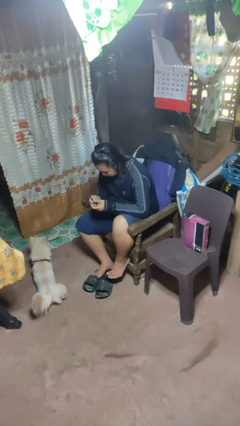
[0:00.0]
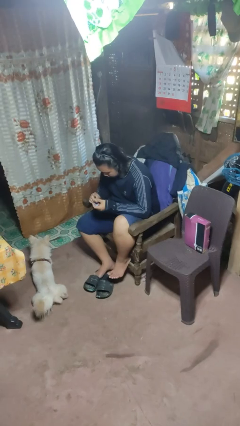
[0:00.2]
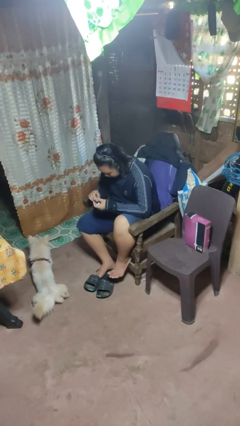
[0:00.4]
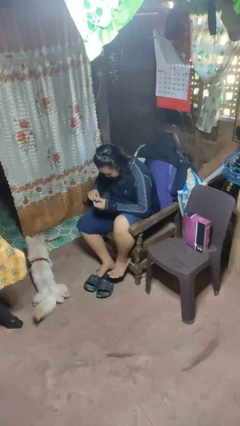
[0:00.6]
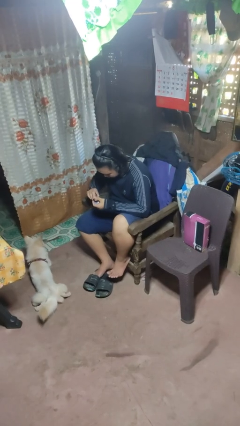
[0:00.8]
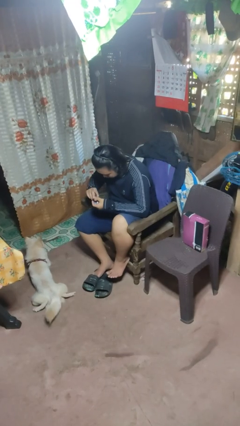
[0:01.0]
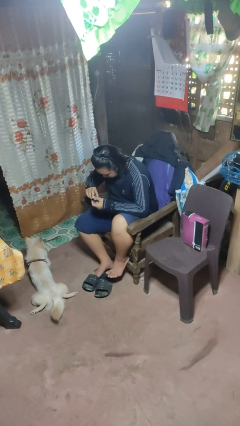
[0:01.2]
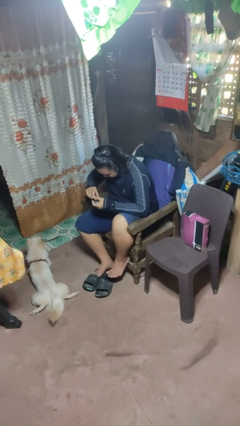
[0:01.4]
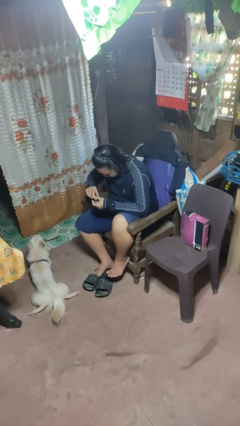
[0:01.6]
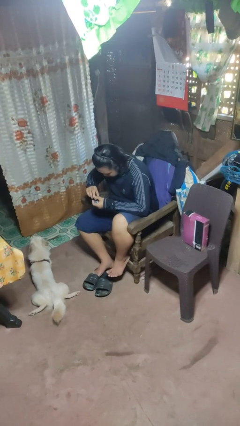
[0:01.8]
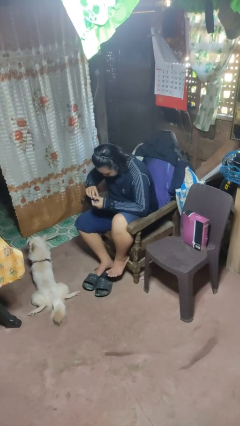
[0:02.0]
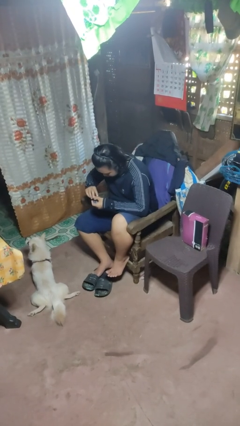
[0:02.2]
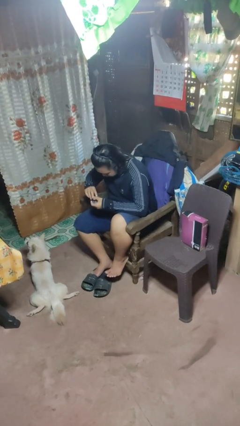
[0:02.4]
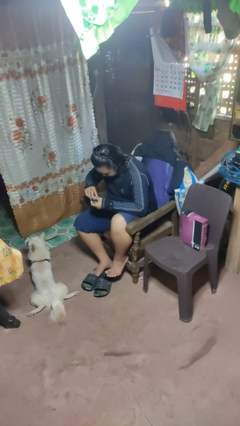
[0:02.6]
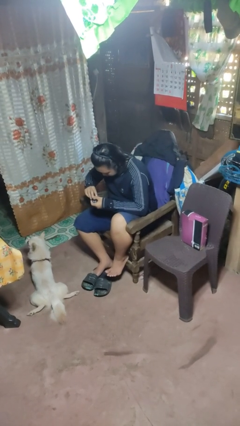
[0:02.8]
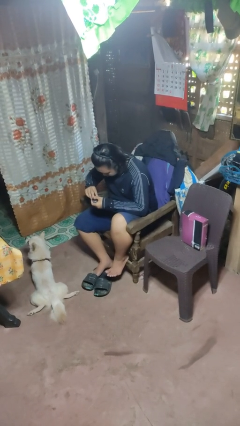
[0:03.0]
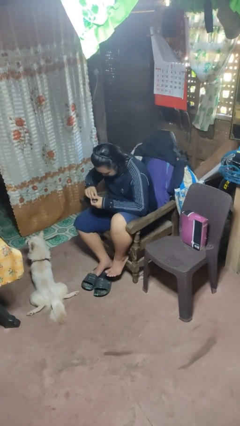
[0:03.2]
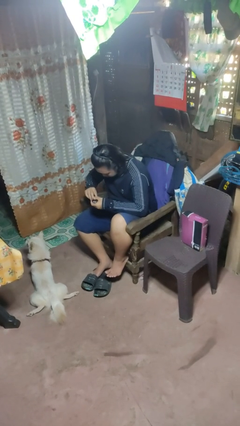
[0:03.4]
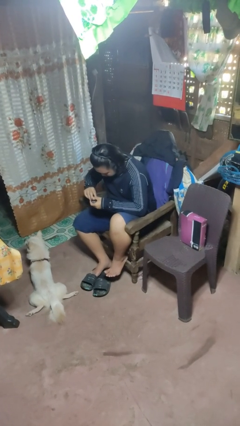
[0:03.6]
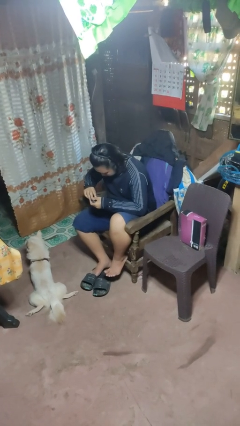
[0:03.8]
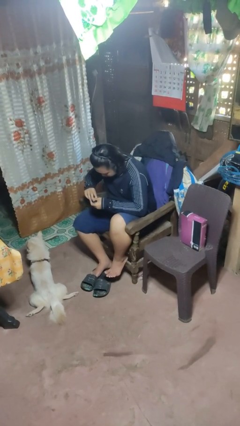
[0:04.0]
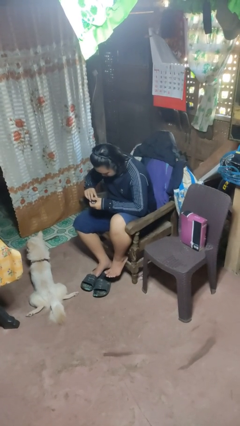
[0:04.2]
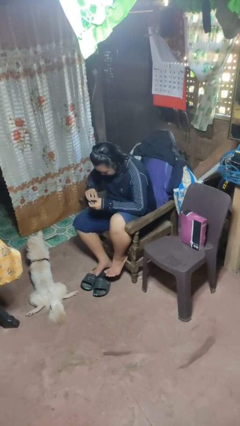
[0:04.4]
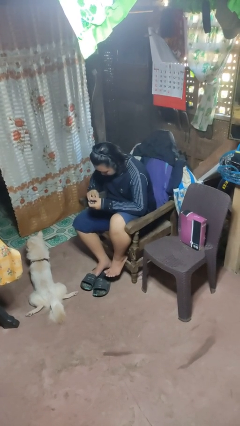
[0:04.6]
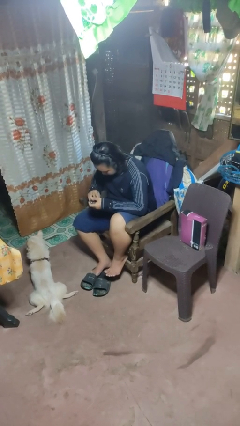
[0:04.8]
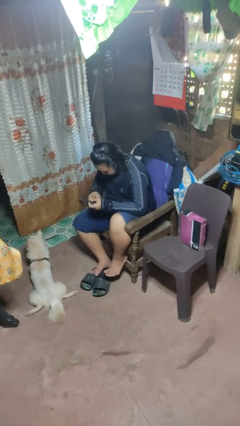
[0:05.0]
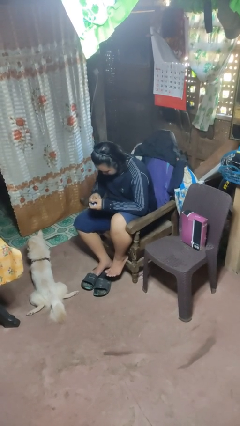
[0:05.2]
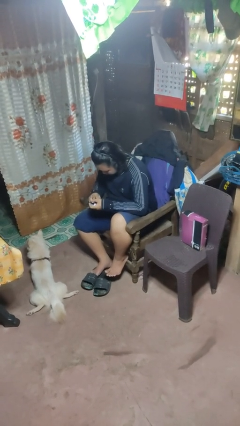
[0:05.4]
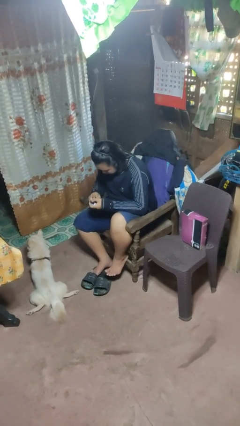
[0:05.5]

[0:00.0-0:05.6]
person clips fingernails

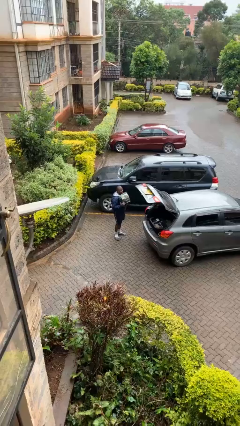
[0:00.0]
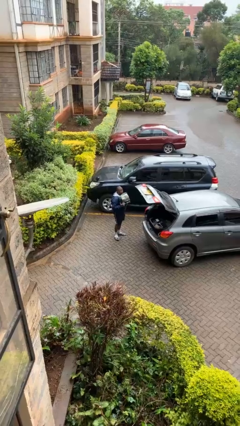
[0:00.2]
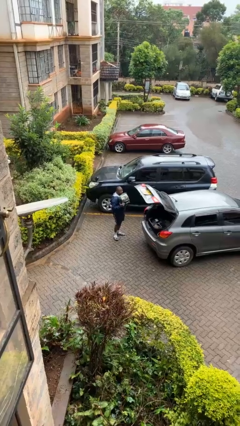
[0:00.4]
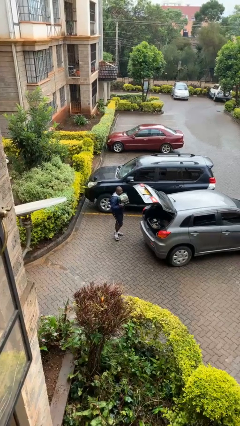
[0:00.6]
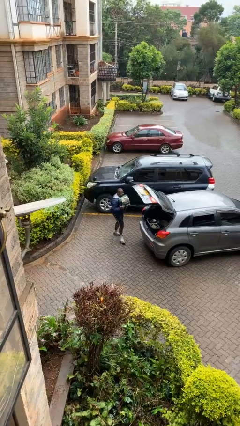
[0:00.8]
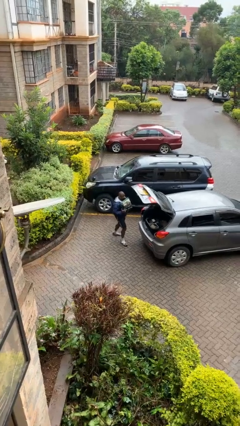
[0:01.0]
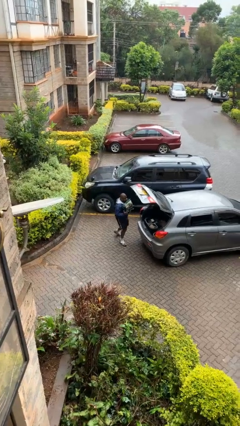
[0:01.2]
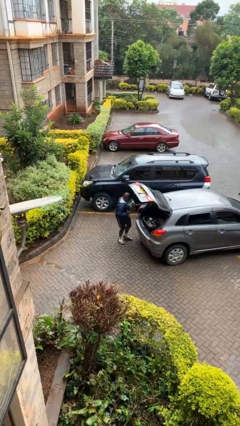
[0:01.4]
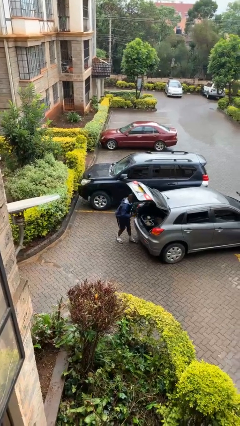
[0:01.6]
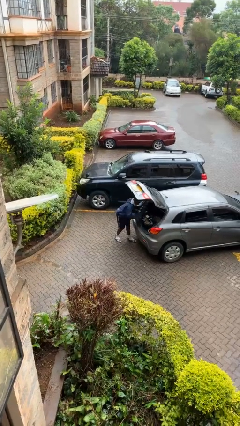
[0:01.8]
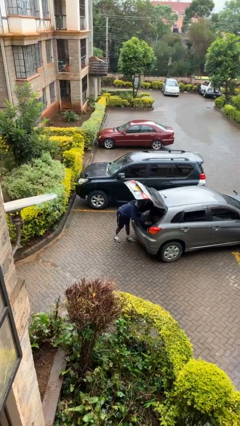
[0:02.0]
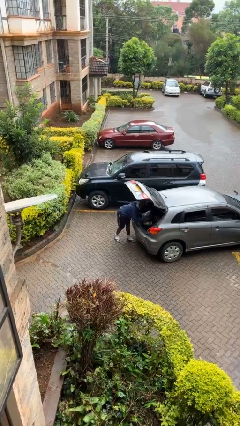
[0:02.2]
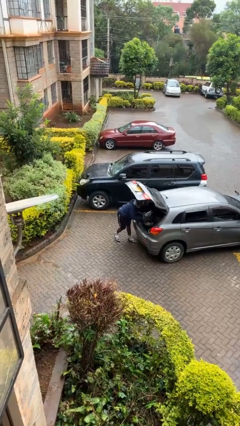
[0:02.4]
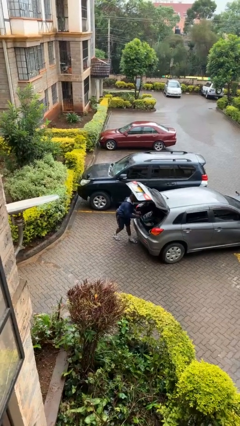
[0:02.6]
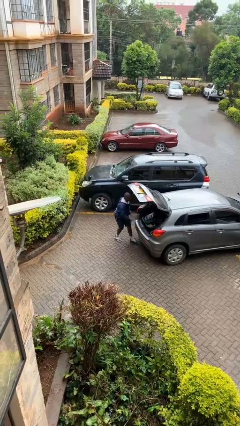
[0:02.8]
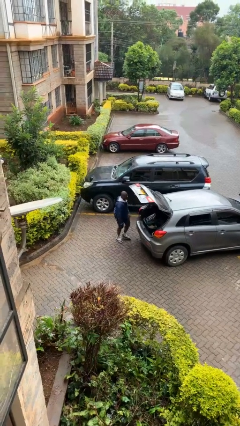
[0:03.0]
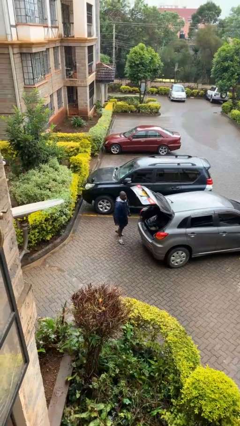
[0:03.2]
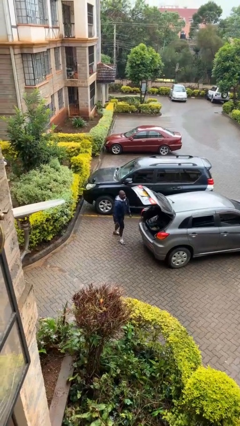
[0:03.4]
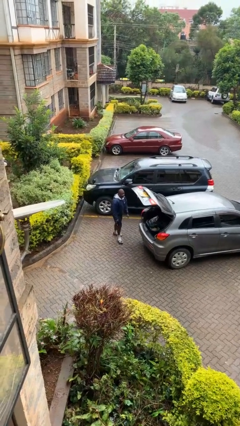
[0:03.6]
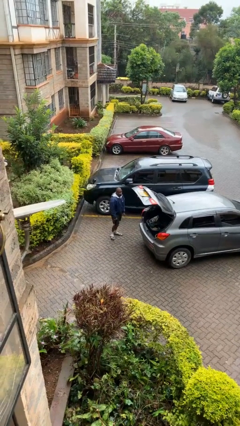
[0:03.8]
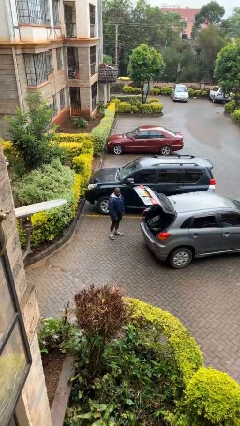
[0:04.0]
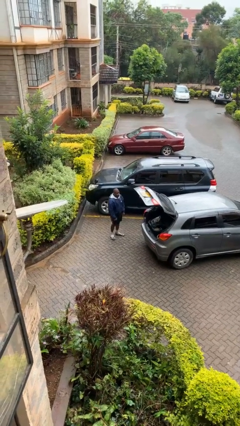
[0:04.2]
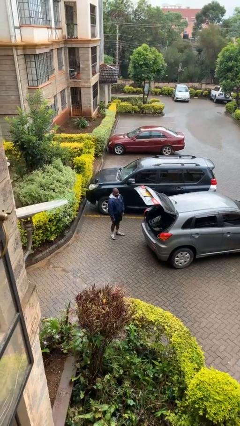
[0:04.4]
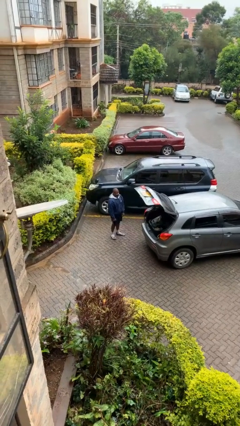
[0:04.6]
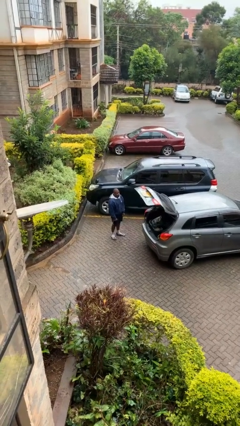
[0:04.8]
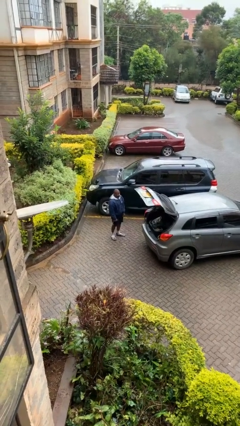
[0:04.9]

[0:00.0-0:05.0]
person loads car

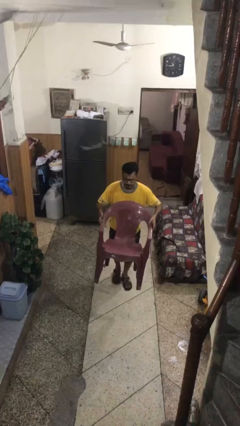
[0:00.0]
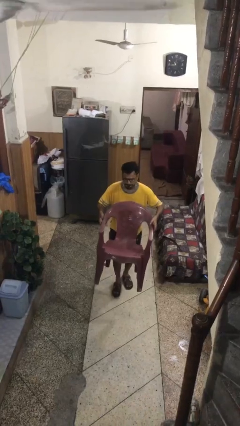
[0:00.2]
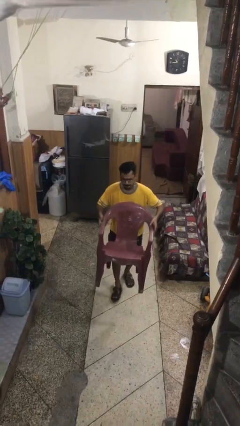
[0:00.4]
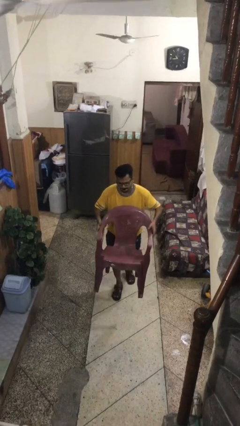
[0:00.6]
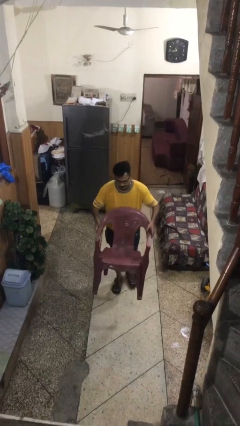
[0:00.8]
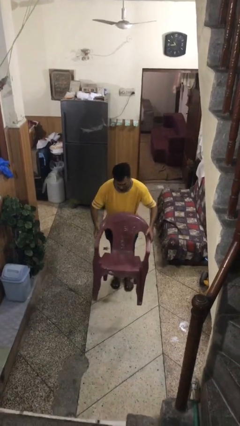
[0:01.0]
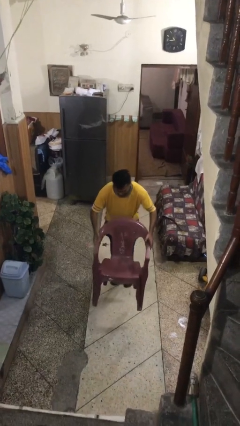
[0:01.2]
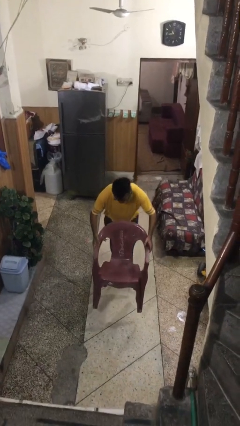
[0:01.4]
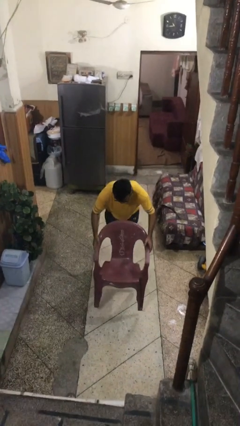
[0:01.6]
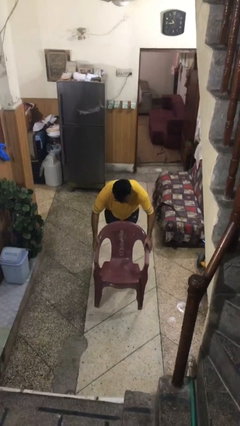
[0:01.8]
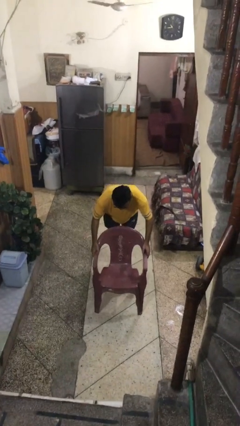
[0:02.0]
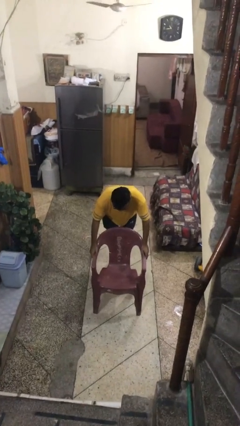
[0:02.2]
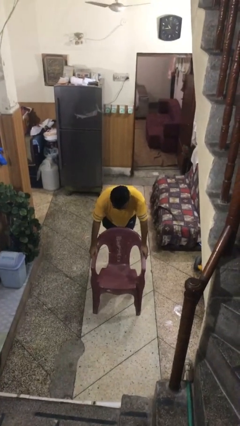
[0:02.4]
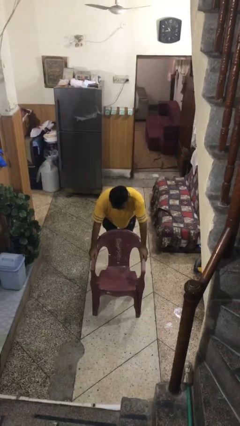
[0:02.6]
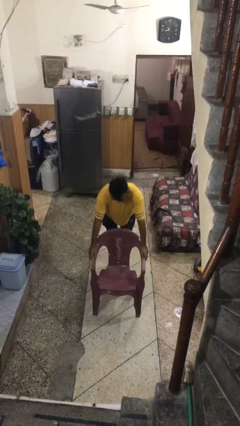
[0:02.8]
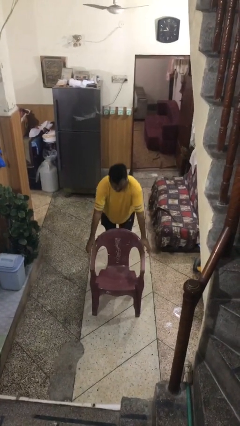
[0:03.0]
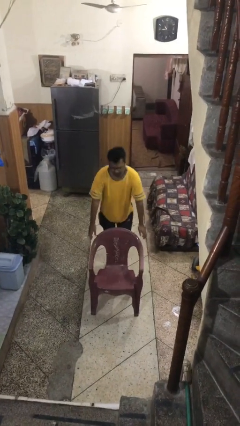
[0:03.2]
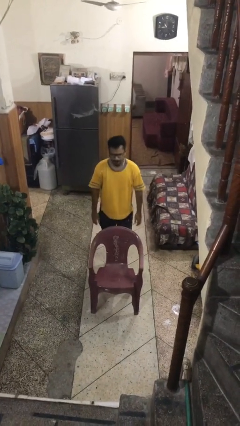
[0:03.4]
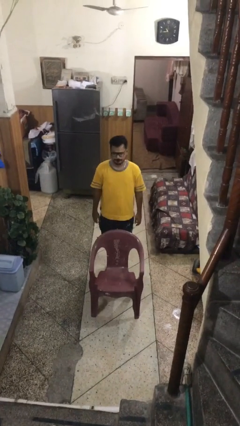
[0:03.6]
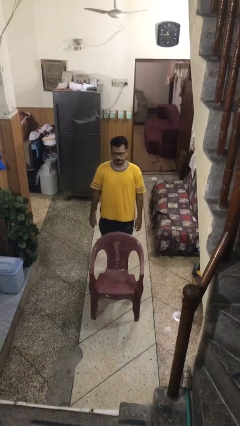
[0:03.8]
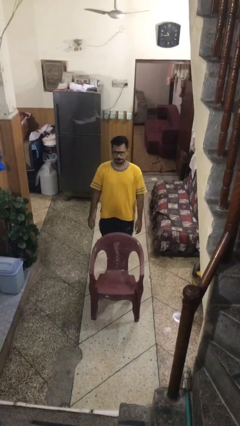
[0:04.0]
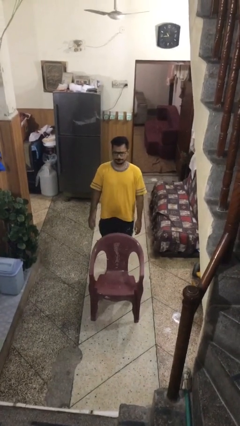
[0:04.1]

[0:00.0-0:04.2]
person puts down object on floor

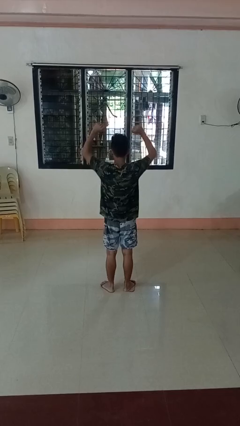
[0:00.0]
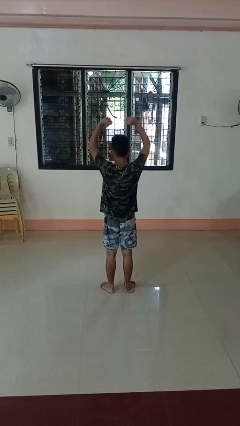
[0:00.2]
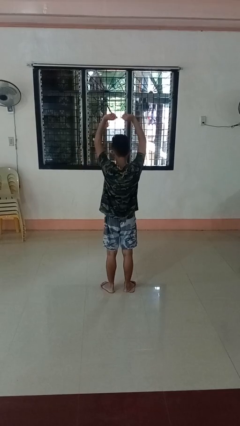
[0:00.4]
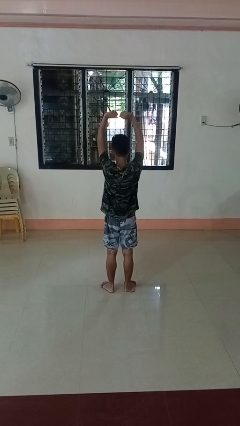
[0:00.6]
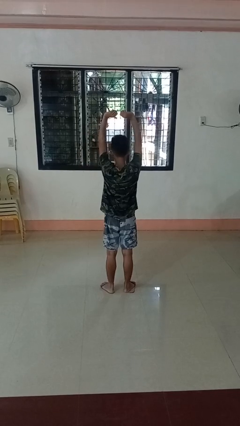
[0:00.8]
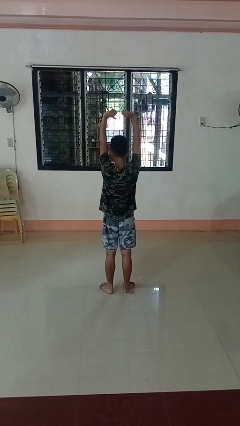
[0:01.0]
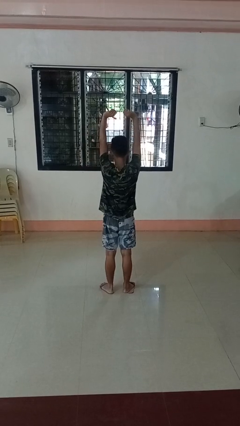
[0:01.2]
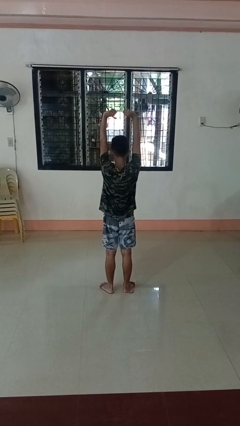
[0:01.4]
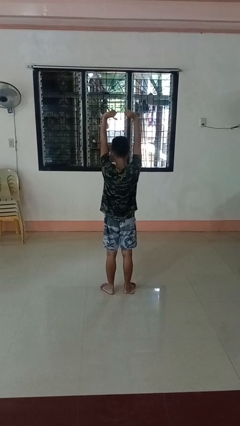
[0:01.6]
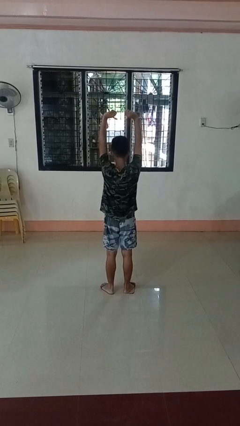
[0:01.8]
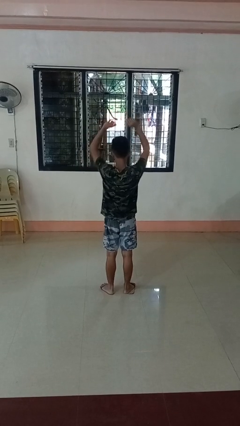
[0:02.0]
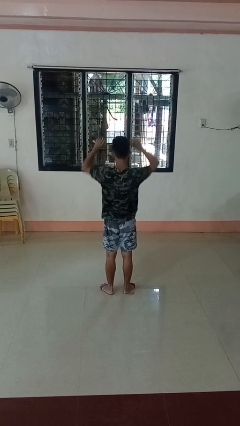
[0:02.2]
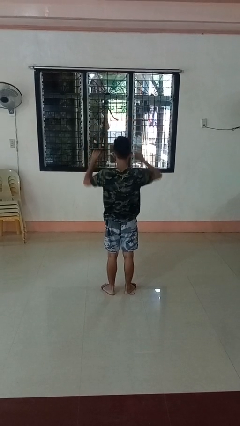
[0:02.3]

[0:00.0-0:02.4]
person stretches arms over head
